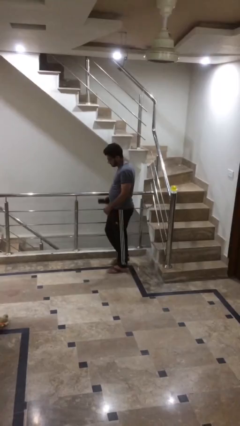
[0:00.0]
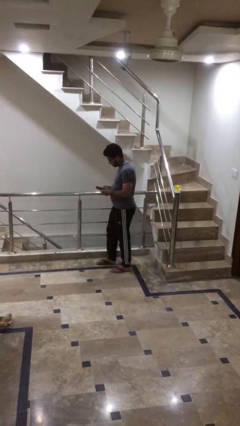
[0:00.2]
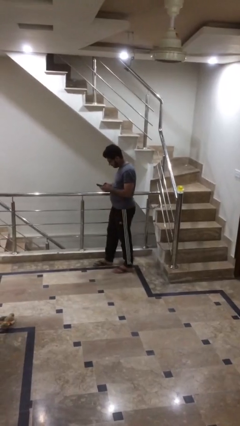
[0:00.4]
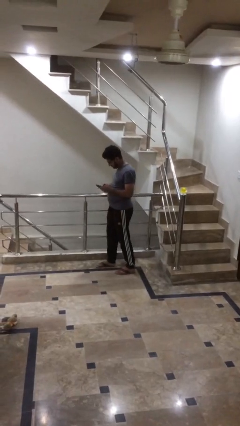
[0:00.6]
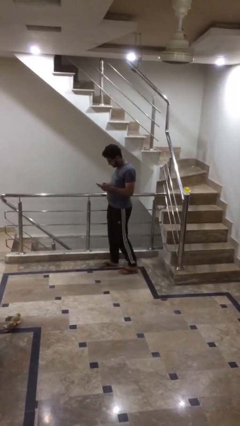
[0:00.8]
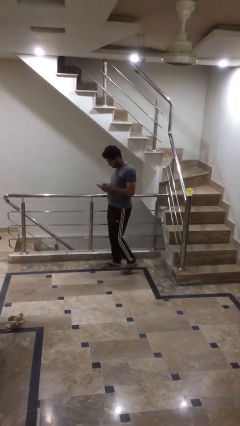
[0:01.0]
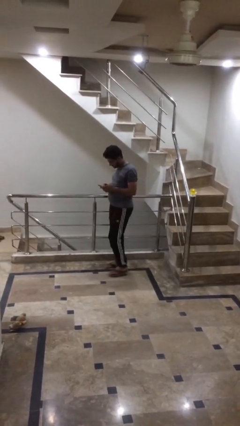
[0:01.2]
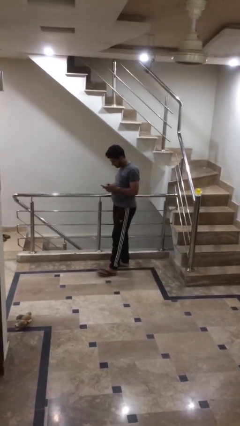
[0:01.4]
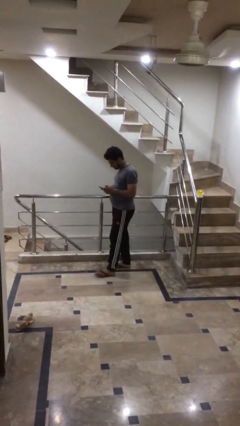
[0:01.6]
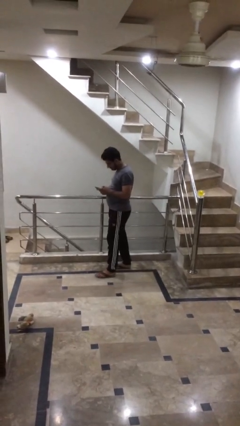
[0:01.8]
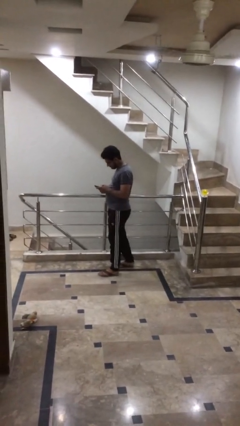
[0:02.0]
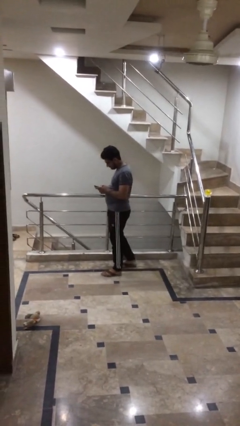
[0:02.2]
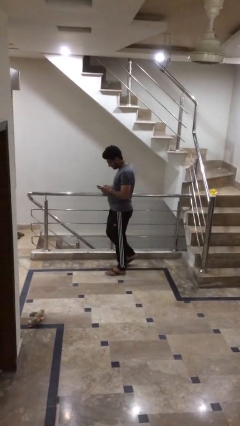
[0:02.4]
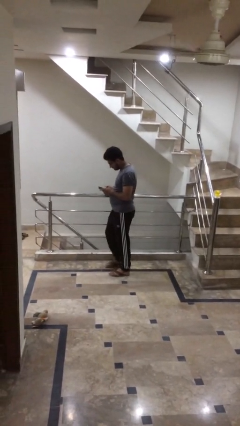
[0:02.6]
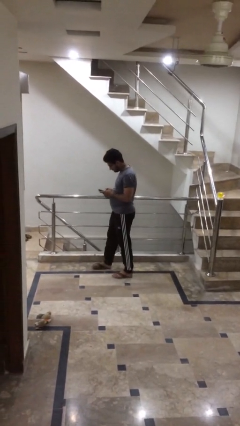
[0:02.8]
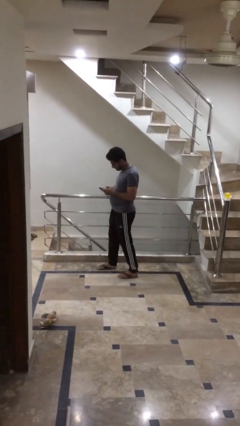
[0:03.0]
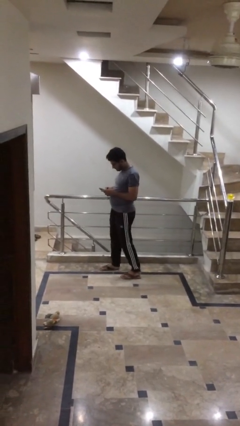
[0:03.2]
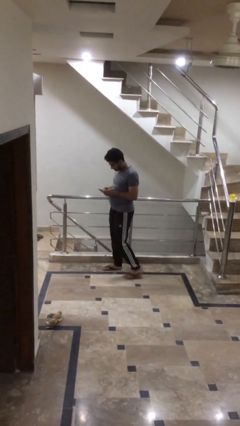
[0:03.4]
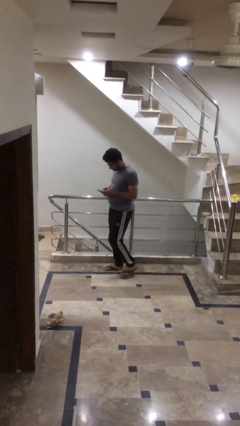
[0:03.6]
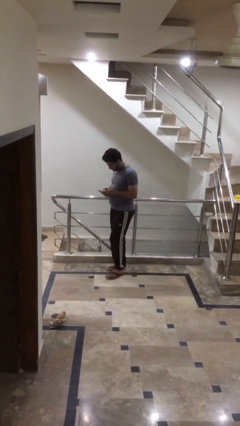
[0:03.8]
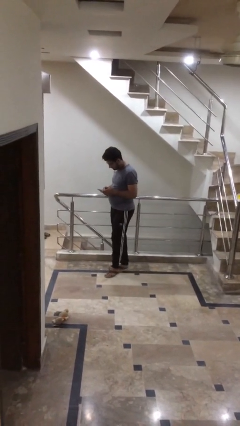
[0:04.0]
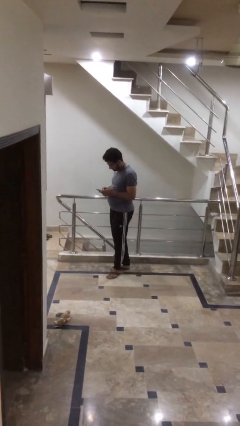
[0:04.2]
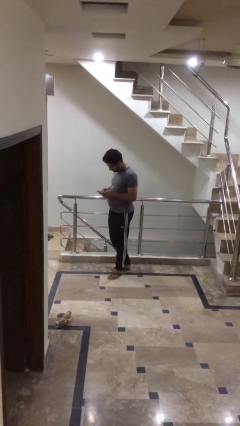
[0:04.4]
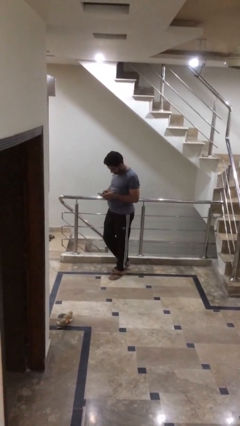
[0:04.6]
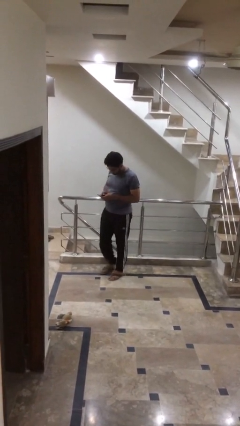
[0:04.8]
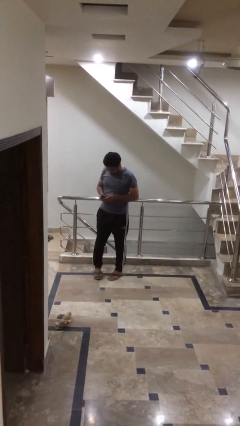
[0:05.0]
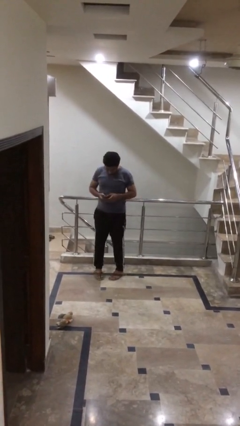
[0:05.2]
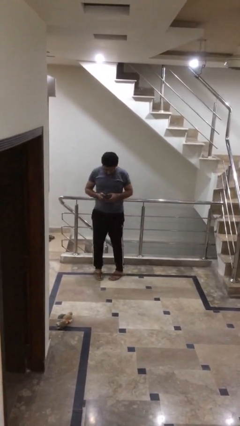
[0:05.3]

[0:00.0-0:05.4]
person texts on phone

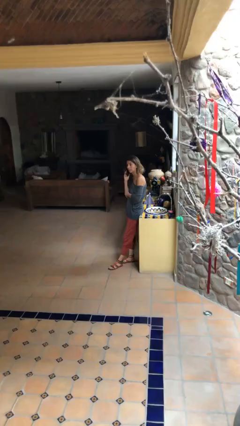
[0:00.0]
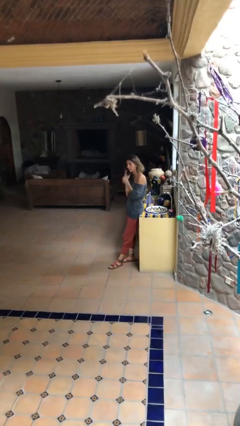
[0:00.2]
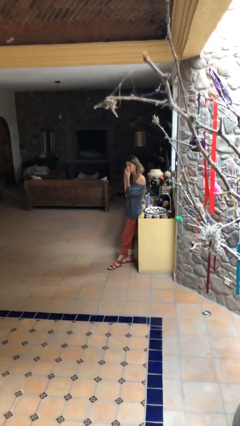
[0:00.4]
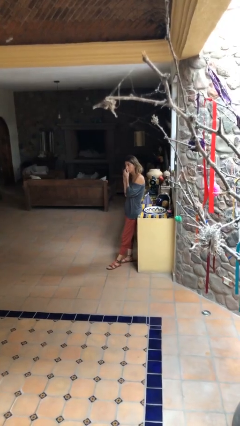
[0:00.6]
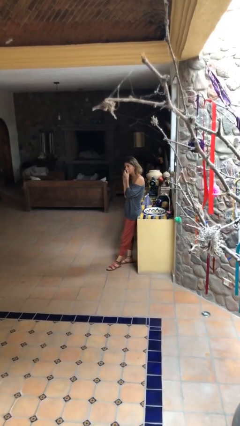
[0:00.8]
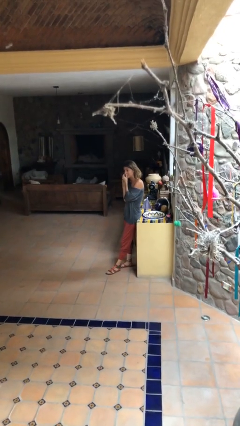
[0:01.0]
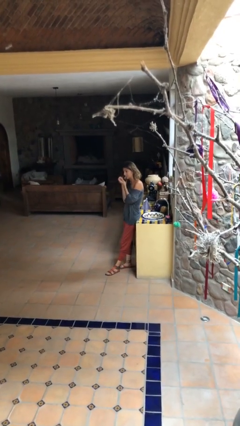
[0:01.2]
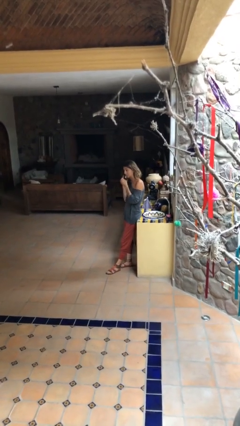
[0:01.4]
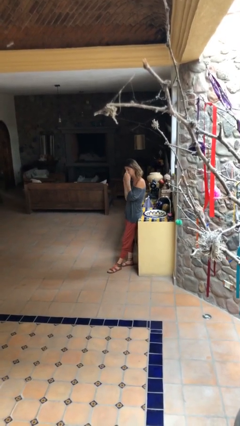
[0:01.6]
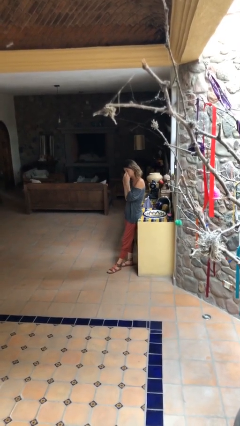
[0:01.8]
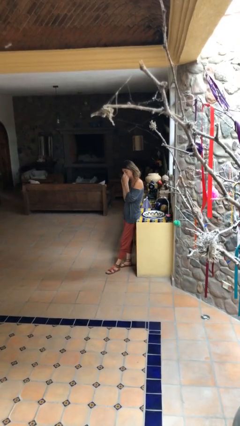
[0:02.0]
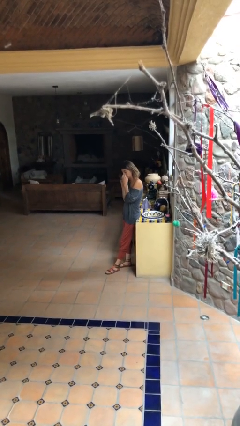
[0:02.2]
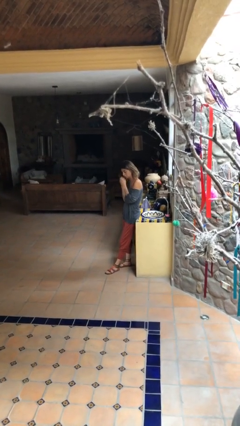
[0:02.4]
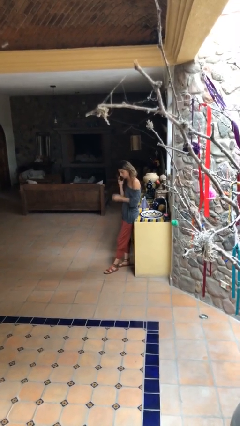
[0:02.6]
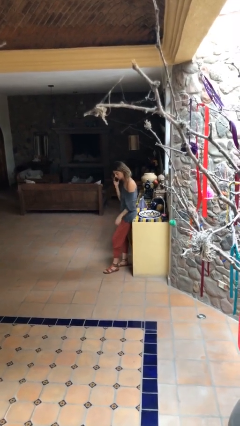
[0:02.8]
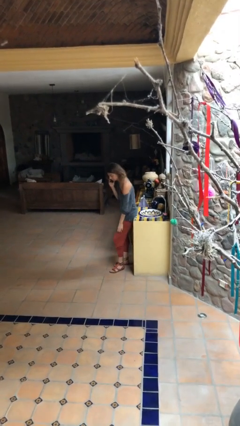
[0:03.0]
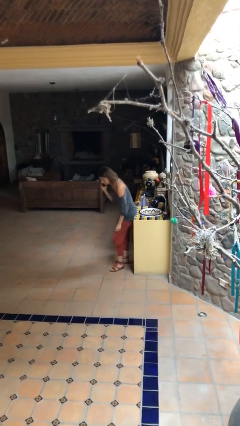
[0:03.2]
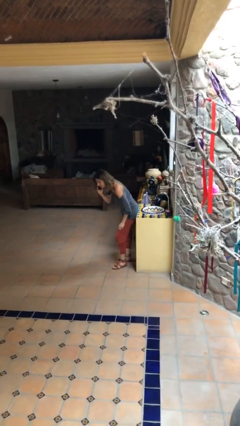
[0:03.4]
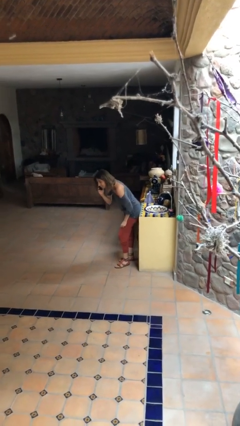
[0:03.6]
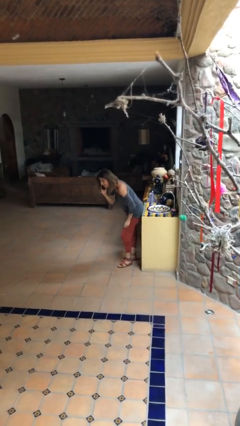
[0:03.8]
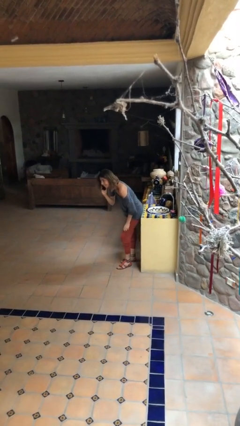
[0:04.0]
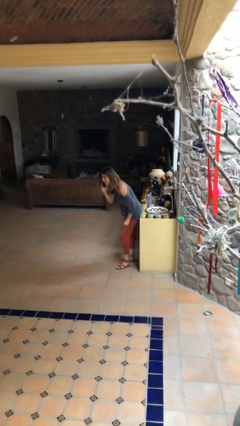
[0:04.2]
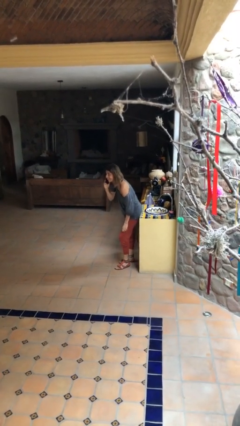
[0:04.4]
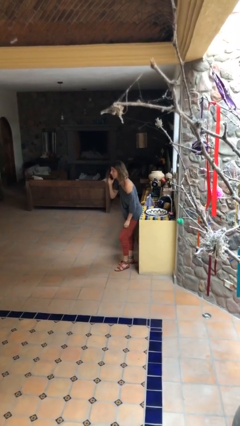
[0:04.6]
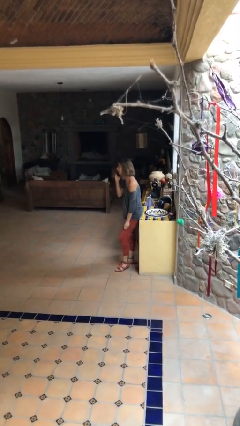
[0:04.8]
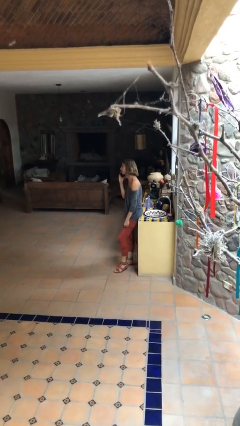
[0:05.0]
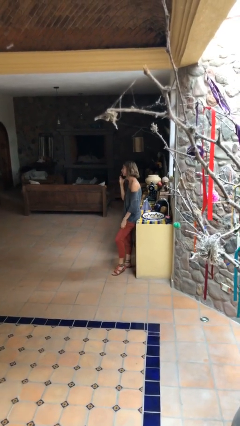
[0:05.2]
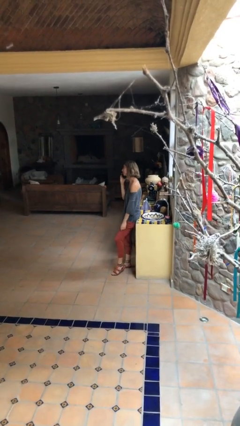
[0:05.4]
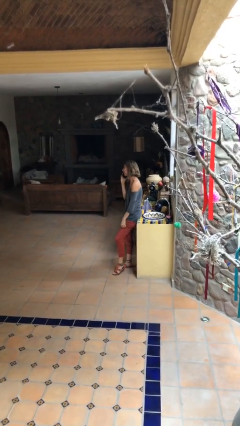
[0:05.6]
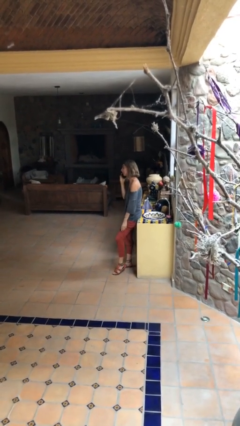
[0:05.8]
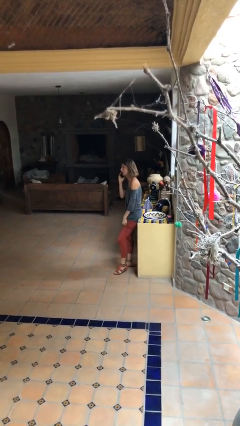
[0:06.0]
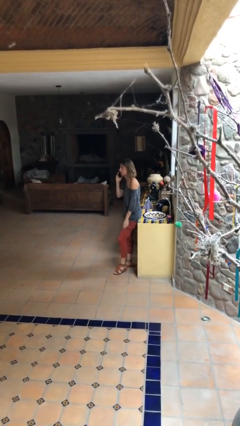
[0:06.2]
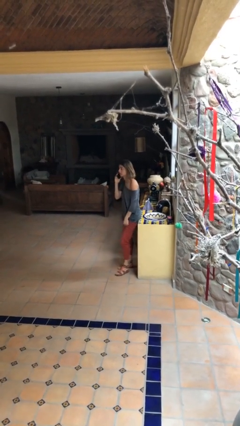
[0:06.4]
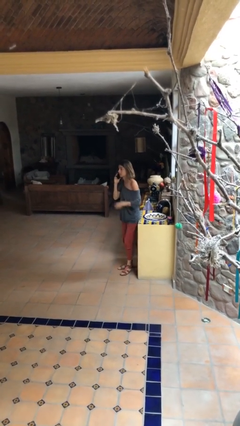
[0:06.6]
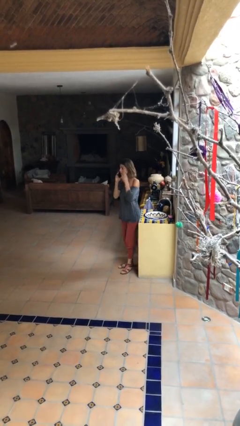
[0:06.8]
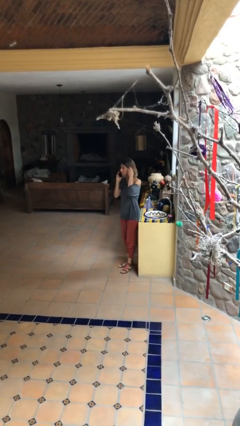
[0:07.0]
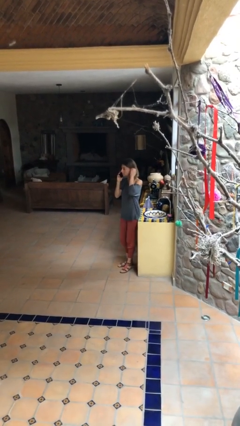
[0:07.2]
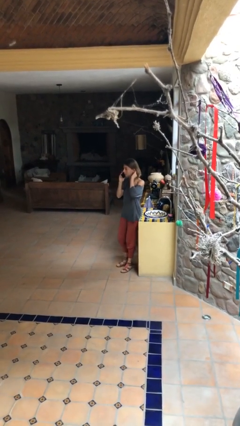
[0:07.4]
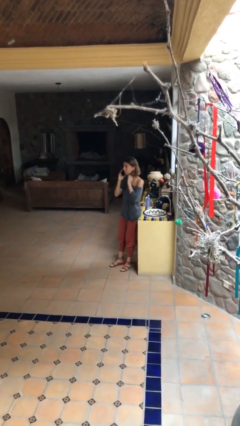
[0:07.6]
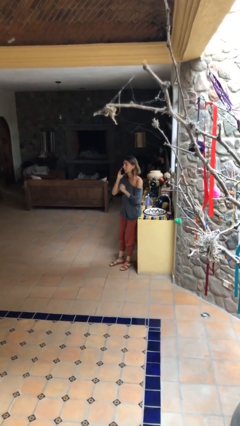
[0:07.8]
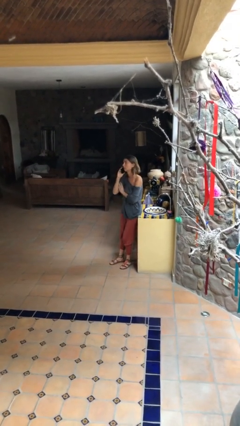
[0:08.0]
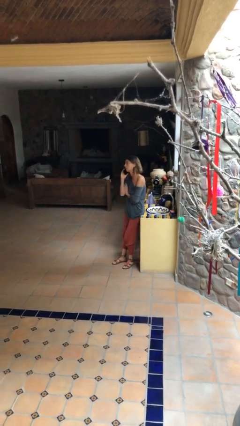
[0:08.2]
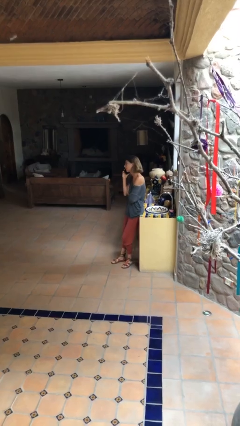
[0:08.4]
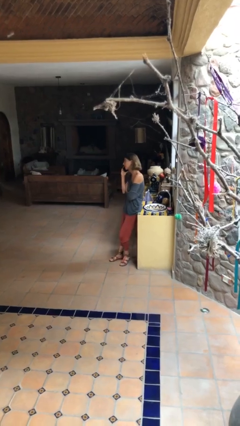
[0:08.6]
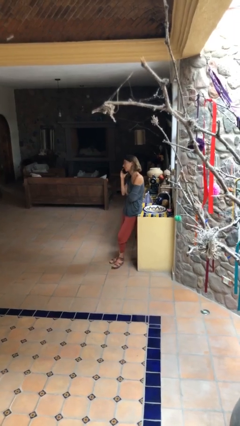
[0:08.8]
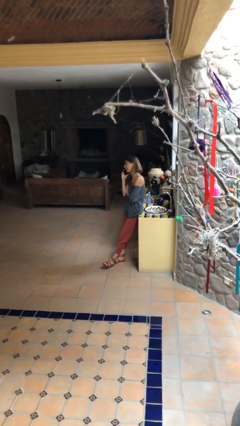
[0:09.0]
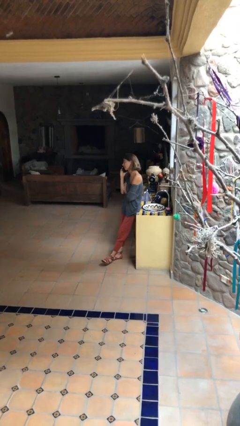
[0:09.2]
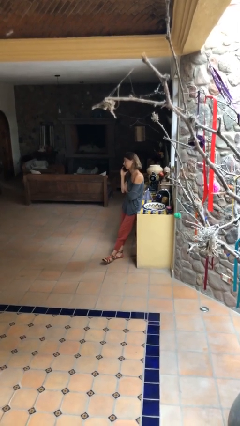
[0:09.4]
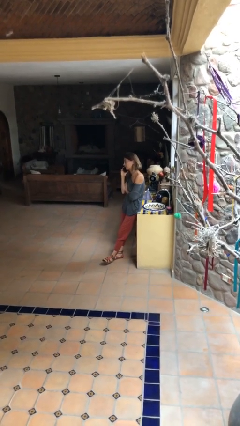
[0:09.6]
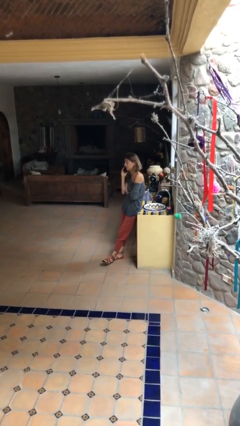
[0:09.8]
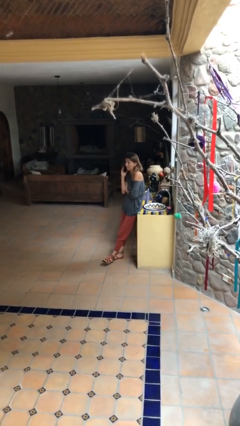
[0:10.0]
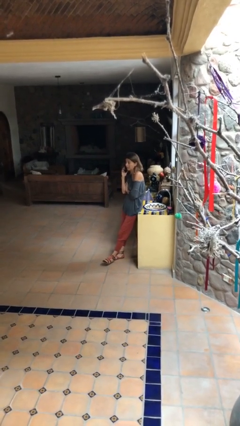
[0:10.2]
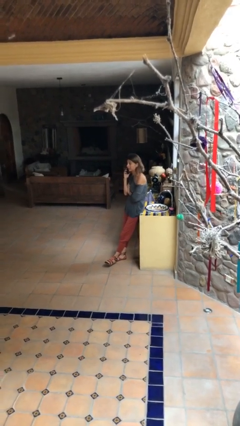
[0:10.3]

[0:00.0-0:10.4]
person talks on phone

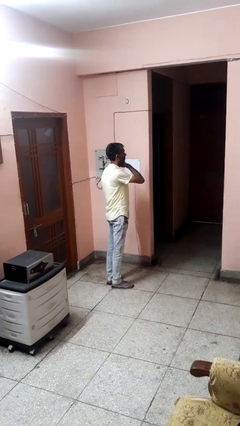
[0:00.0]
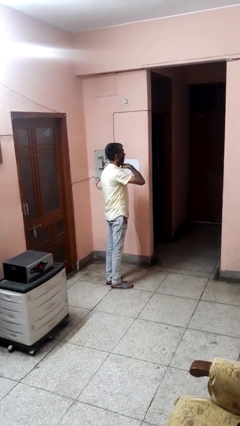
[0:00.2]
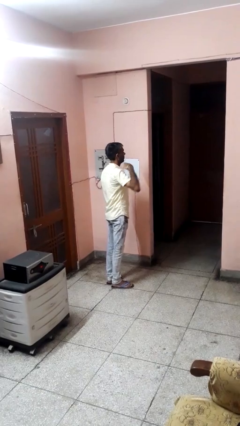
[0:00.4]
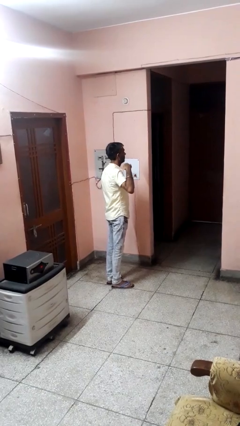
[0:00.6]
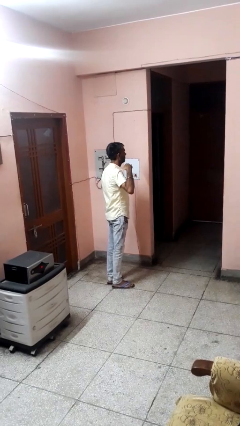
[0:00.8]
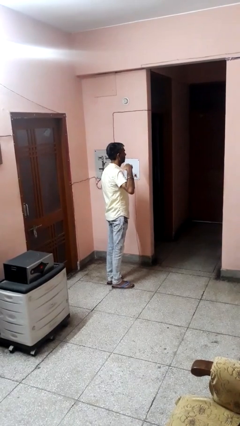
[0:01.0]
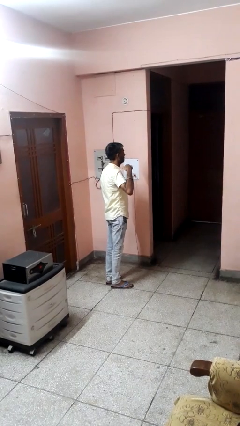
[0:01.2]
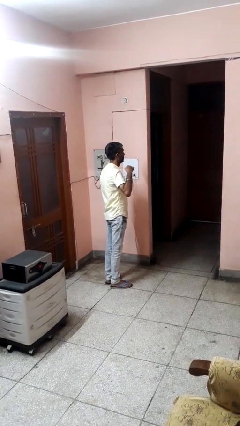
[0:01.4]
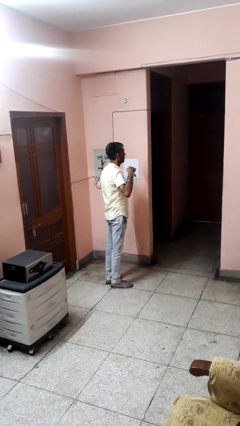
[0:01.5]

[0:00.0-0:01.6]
person gestures cut

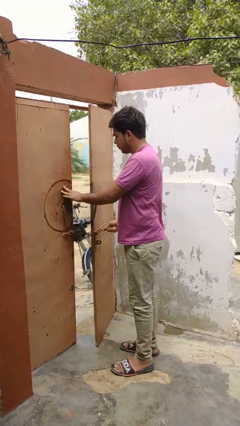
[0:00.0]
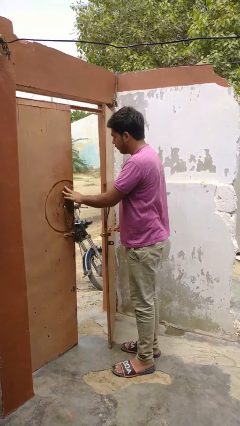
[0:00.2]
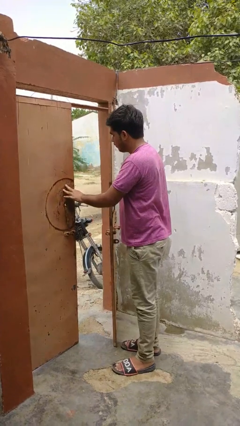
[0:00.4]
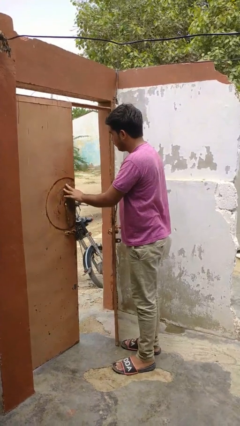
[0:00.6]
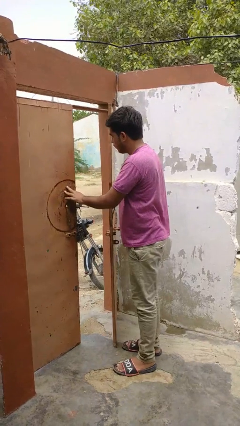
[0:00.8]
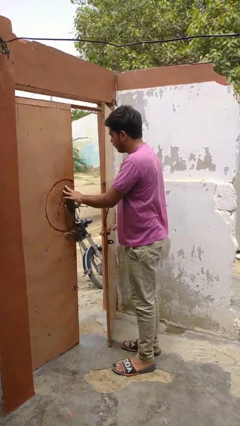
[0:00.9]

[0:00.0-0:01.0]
person opens facility door
